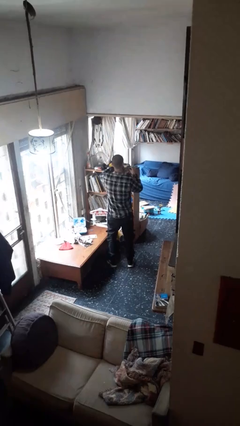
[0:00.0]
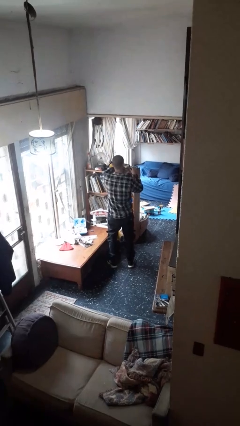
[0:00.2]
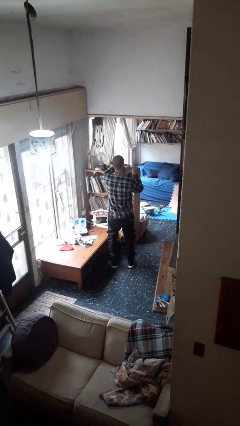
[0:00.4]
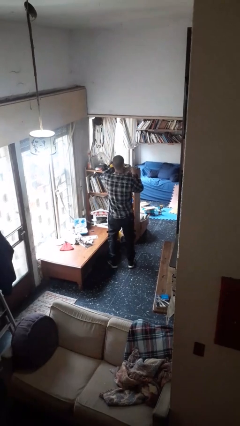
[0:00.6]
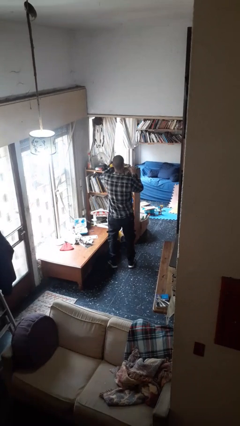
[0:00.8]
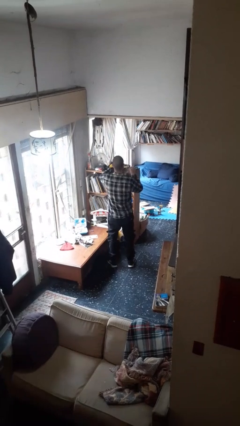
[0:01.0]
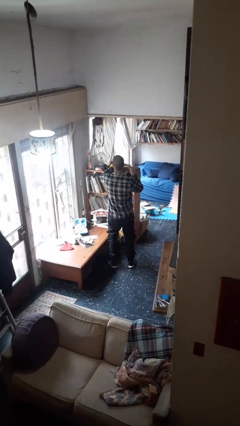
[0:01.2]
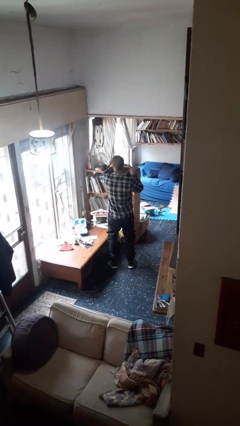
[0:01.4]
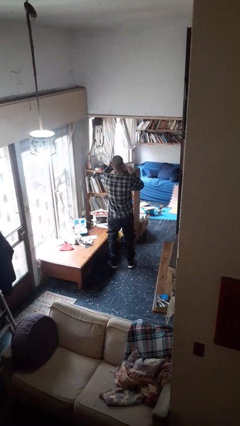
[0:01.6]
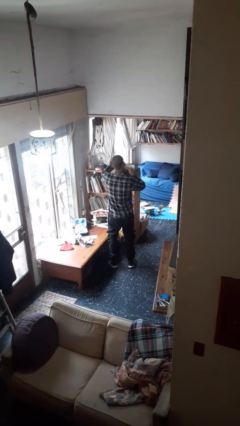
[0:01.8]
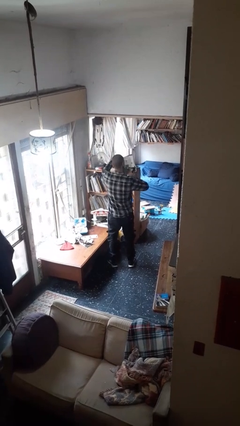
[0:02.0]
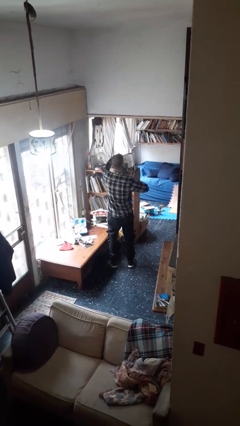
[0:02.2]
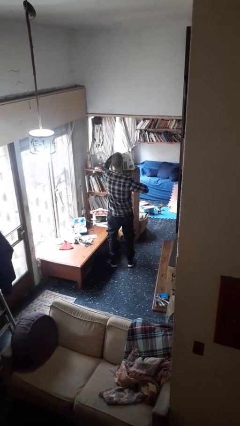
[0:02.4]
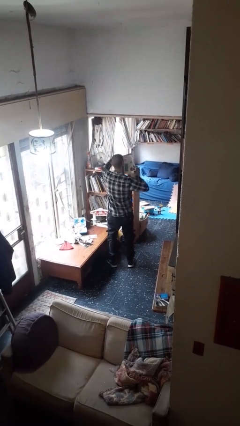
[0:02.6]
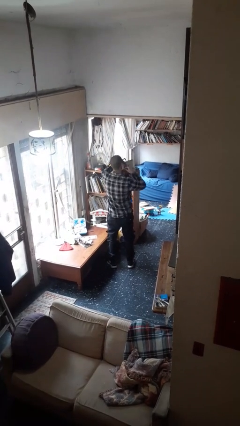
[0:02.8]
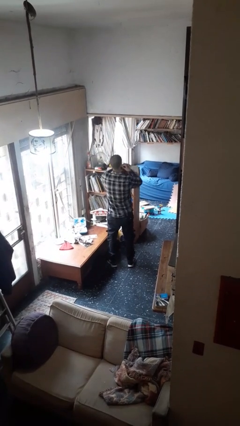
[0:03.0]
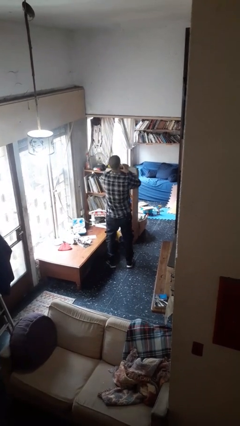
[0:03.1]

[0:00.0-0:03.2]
person tears paper

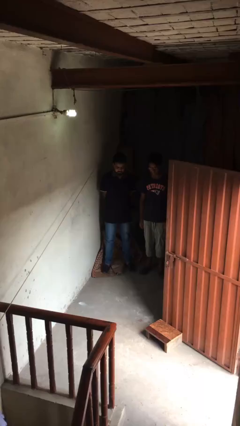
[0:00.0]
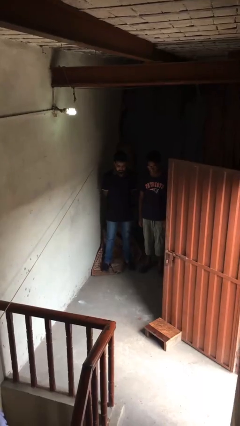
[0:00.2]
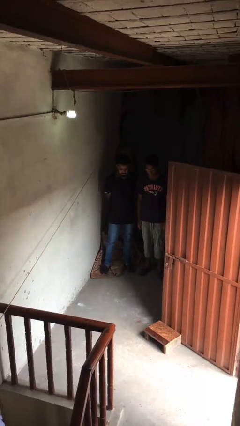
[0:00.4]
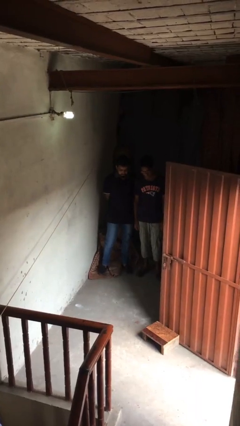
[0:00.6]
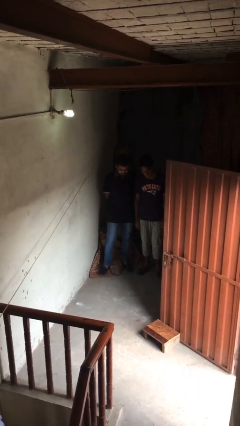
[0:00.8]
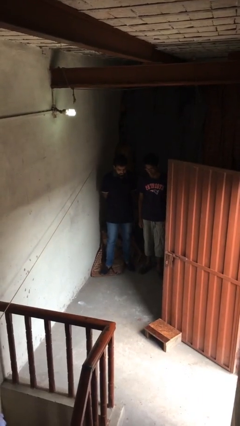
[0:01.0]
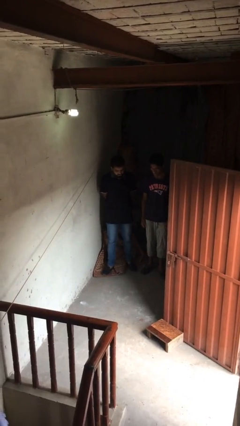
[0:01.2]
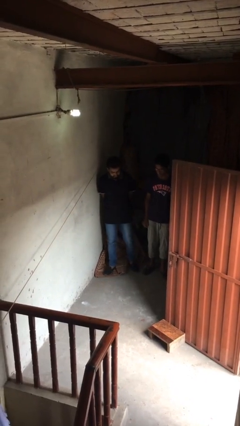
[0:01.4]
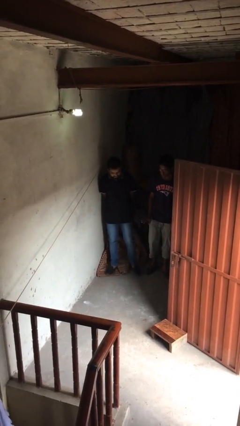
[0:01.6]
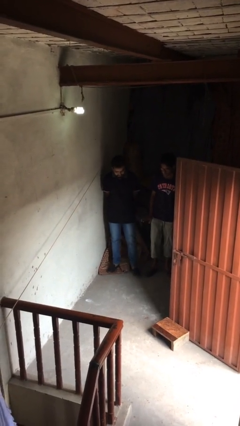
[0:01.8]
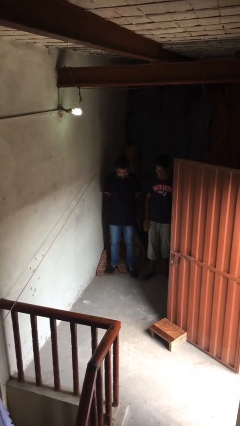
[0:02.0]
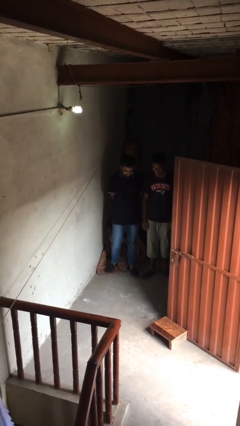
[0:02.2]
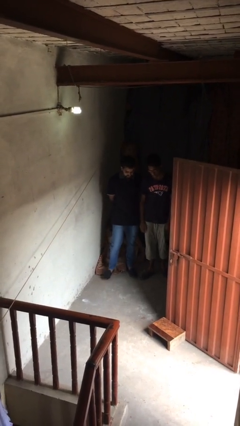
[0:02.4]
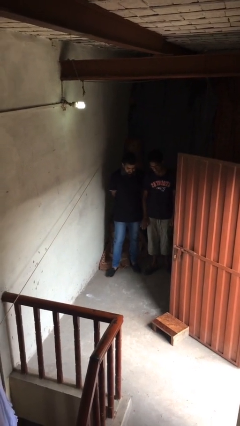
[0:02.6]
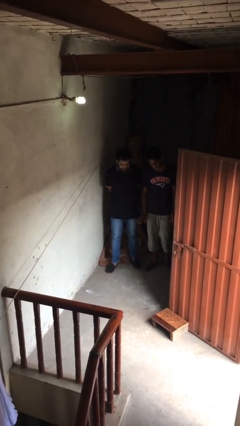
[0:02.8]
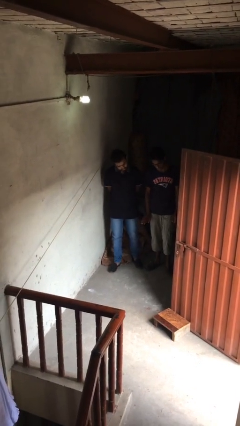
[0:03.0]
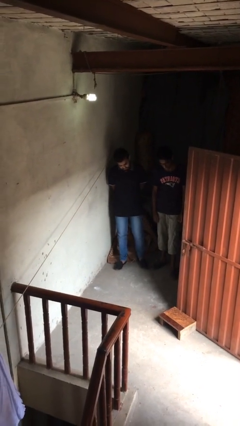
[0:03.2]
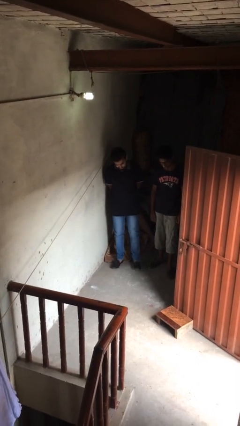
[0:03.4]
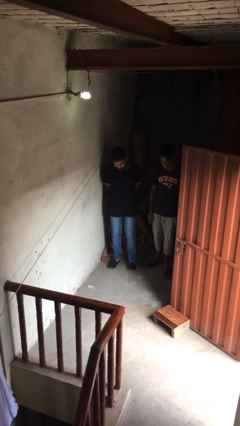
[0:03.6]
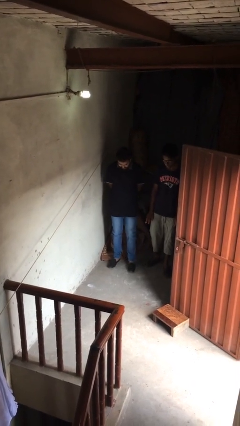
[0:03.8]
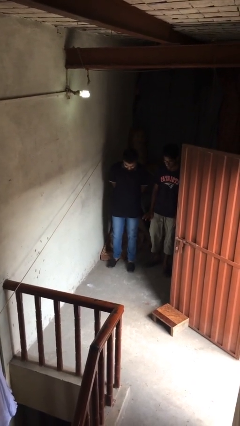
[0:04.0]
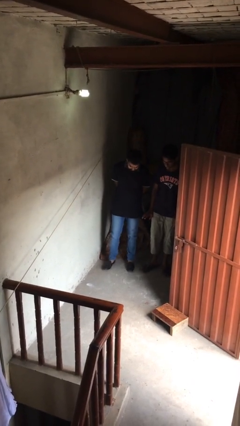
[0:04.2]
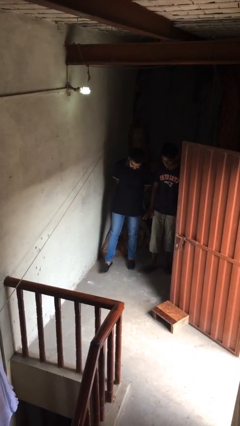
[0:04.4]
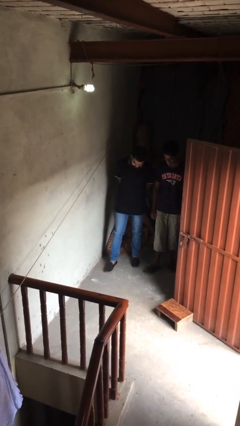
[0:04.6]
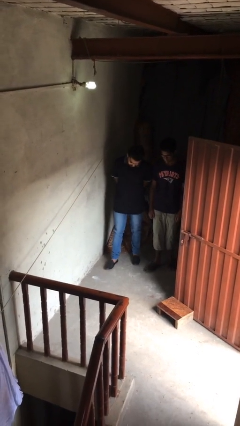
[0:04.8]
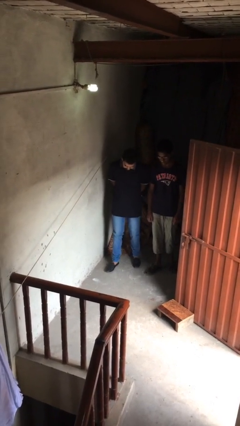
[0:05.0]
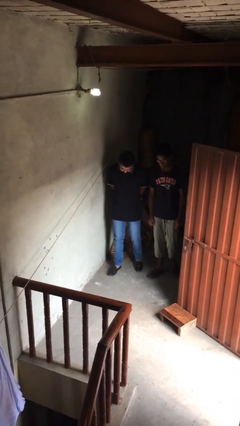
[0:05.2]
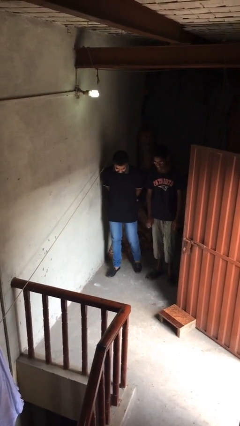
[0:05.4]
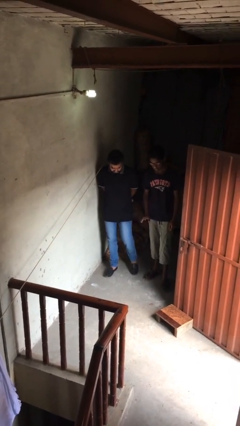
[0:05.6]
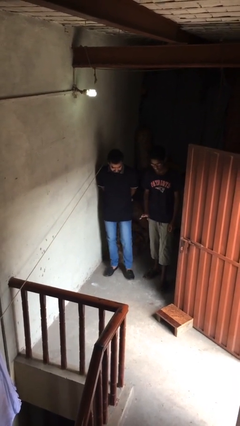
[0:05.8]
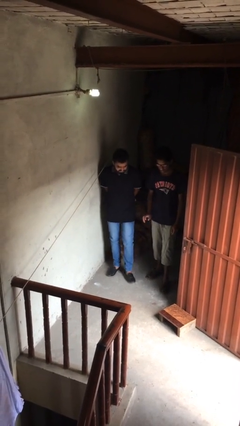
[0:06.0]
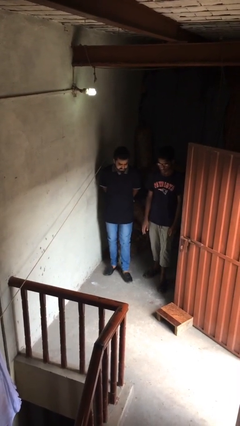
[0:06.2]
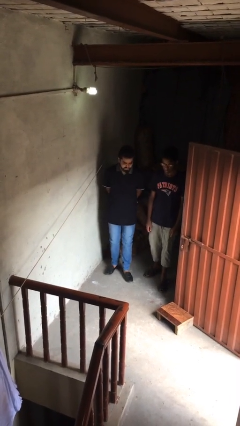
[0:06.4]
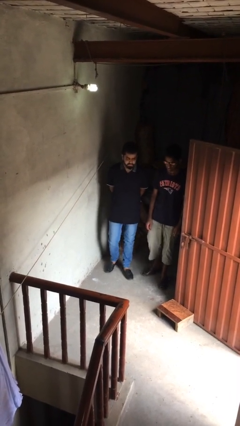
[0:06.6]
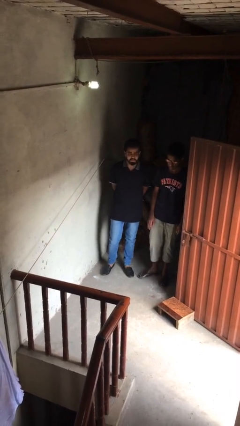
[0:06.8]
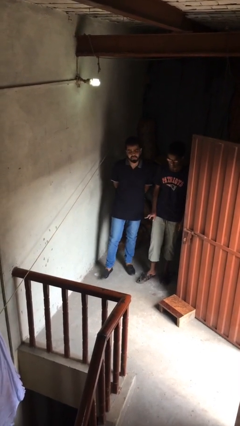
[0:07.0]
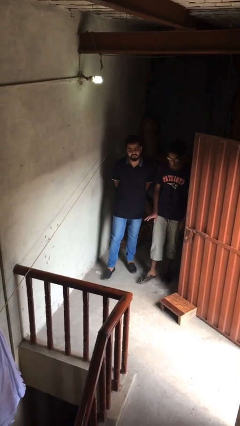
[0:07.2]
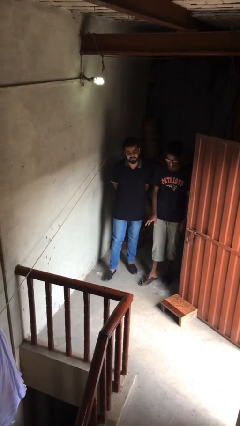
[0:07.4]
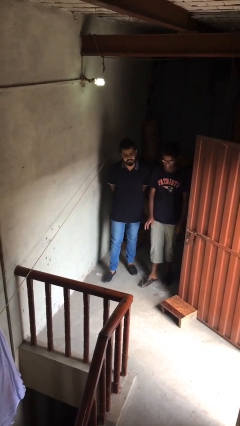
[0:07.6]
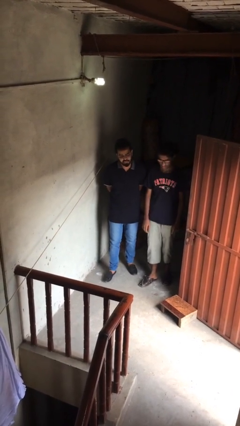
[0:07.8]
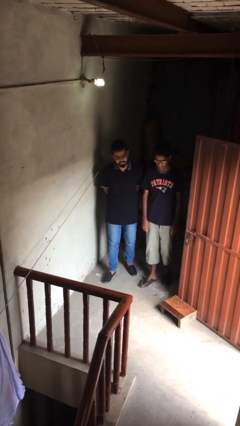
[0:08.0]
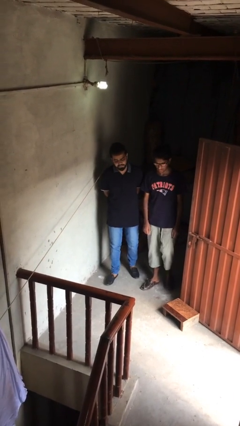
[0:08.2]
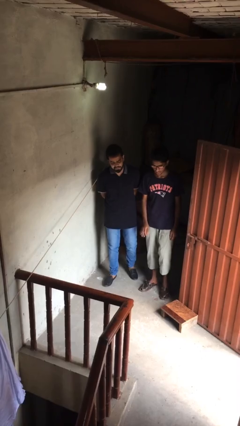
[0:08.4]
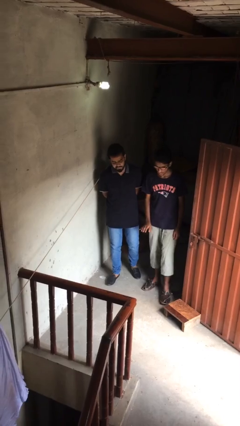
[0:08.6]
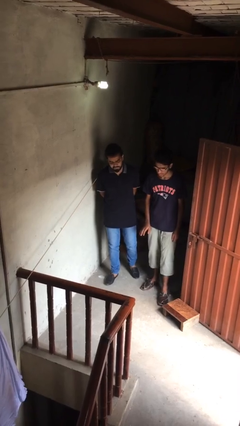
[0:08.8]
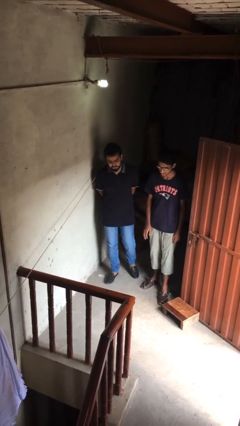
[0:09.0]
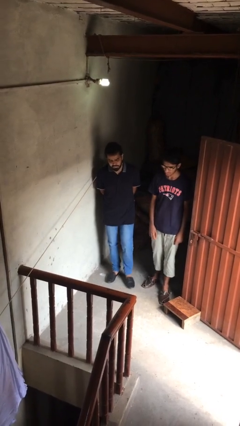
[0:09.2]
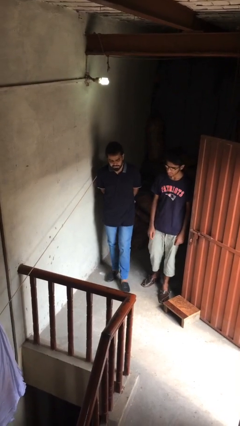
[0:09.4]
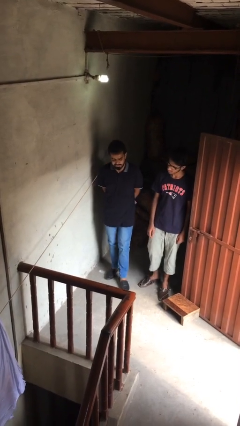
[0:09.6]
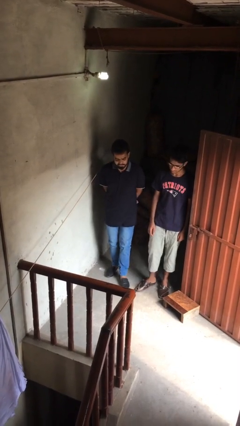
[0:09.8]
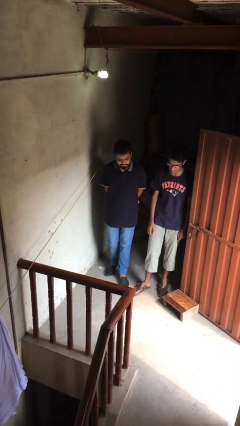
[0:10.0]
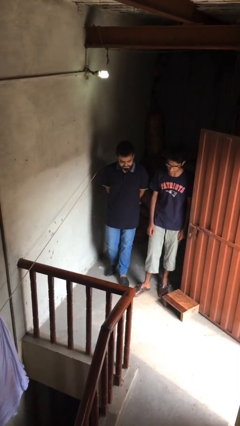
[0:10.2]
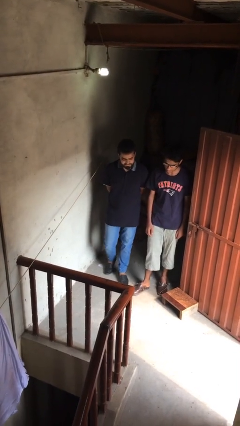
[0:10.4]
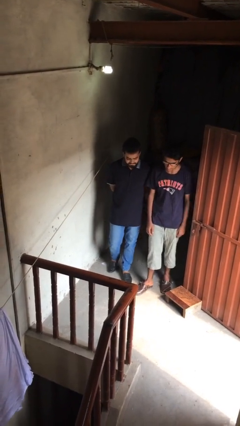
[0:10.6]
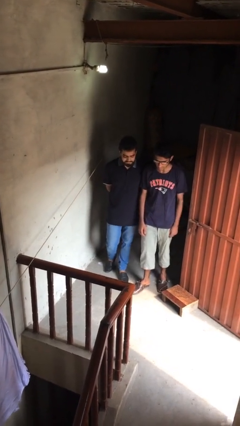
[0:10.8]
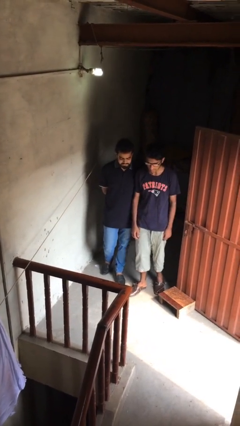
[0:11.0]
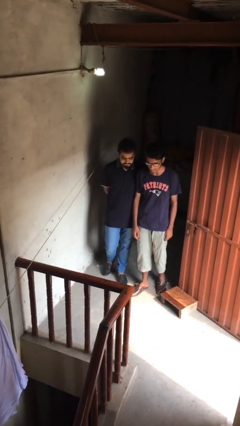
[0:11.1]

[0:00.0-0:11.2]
person talks to person

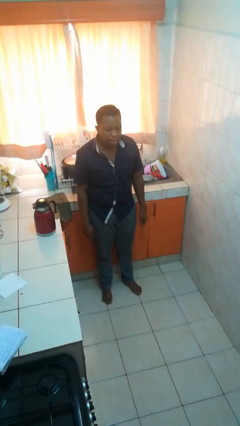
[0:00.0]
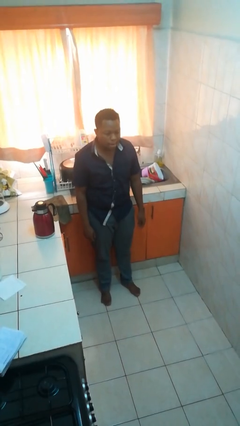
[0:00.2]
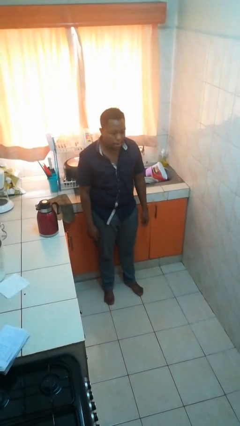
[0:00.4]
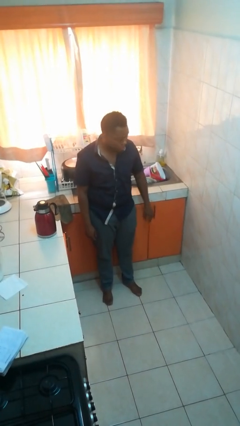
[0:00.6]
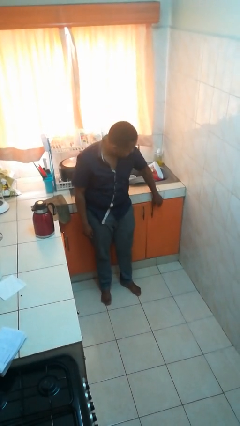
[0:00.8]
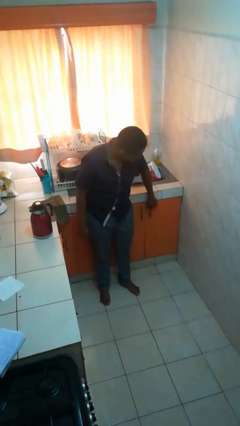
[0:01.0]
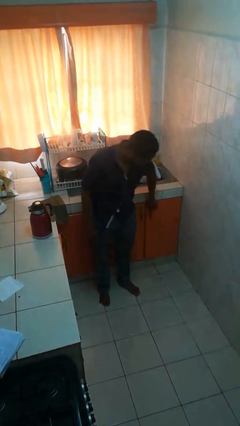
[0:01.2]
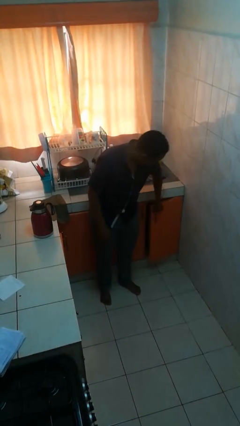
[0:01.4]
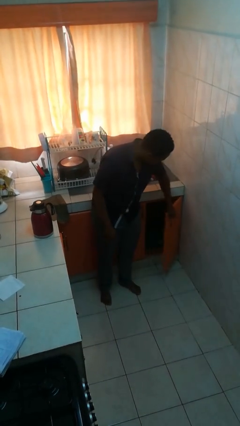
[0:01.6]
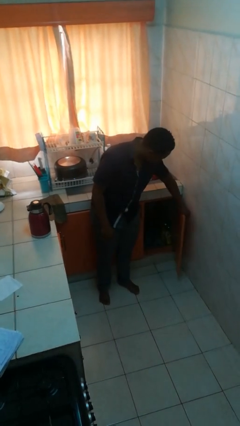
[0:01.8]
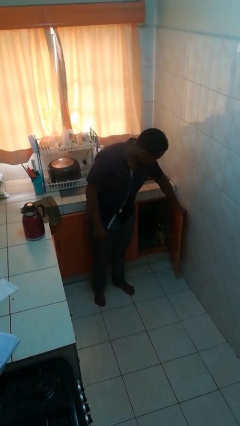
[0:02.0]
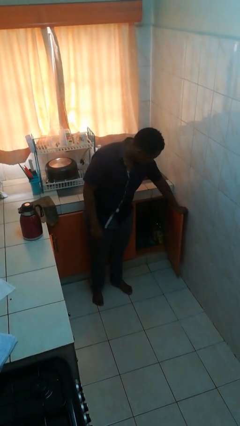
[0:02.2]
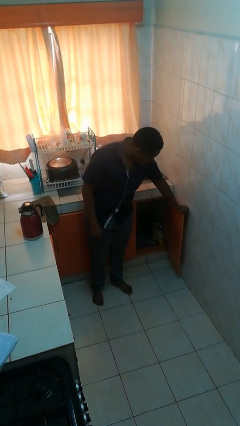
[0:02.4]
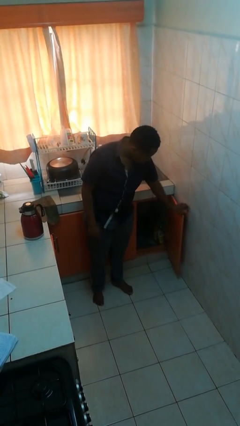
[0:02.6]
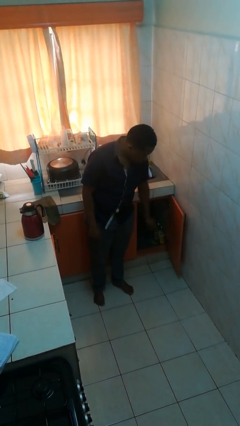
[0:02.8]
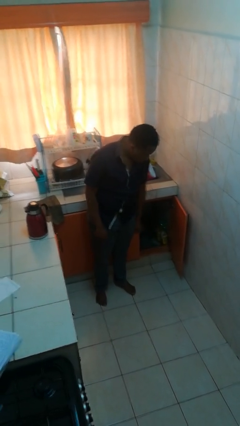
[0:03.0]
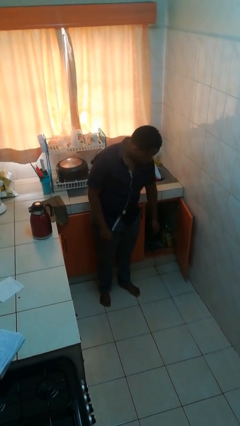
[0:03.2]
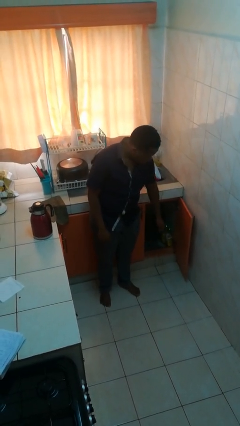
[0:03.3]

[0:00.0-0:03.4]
person opens cabinet

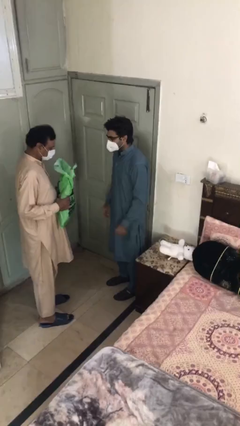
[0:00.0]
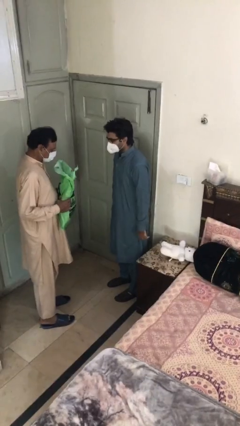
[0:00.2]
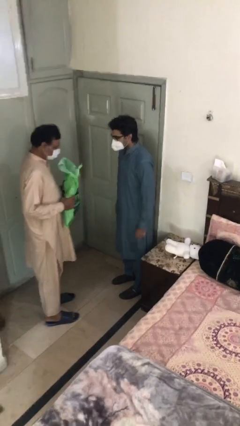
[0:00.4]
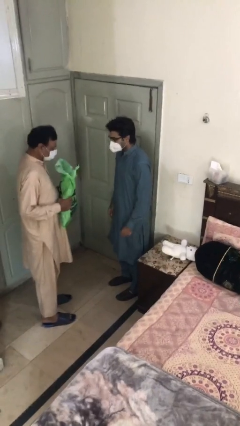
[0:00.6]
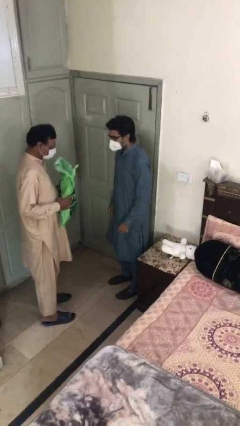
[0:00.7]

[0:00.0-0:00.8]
person transfers object to person
